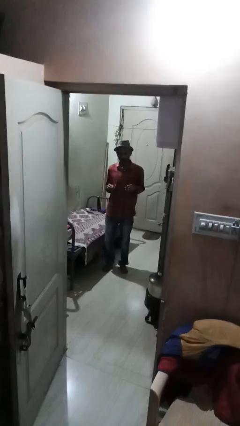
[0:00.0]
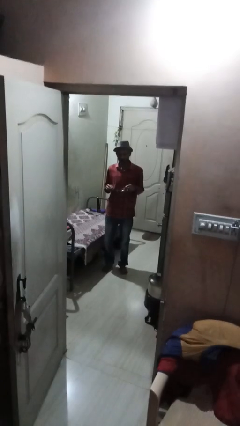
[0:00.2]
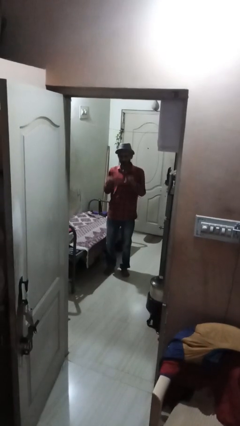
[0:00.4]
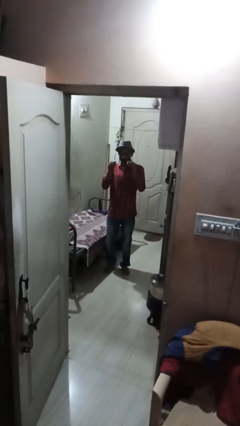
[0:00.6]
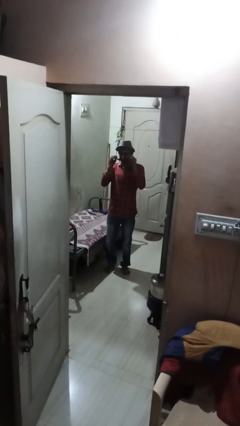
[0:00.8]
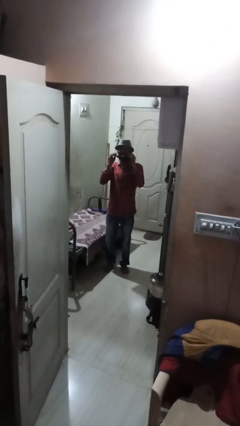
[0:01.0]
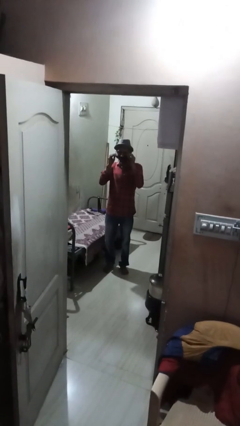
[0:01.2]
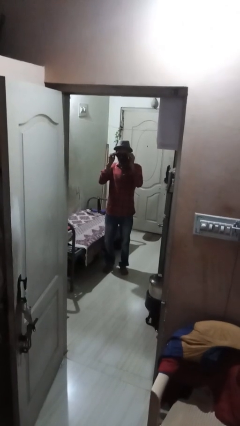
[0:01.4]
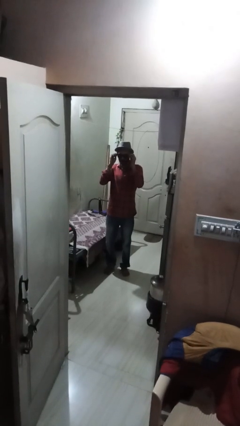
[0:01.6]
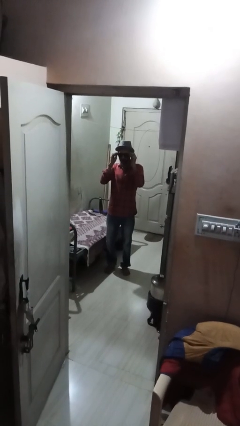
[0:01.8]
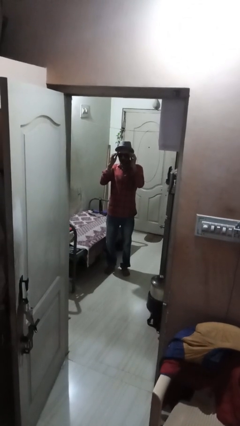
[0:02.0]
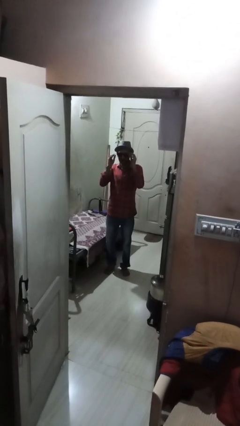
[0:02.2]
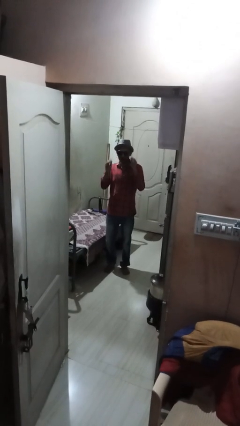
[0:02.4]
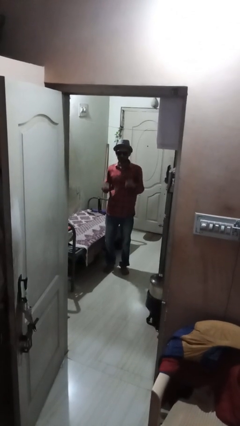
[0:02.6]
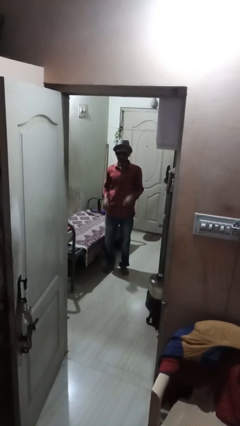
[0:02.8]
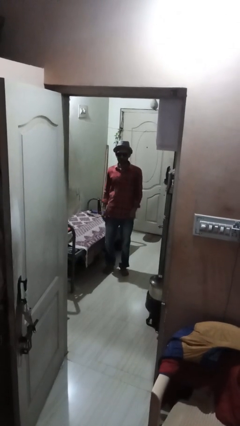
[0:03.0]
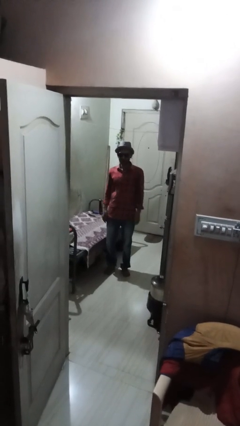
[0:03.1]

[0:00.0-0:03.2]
person puts on sunglasses

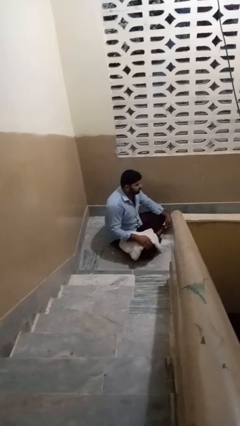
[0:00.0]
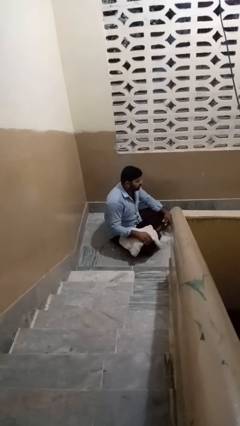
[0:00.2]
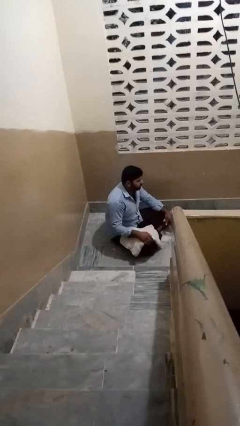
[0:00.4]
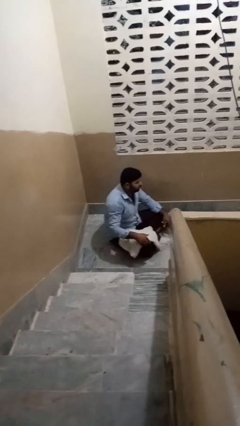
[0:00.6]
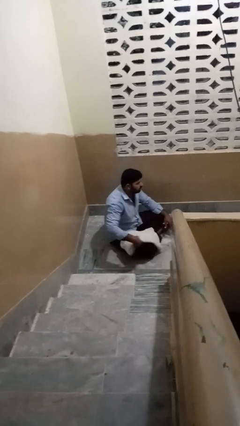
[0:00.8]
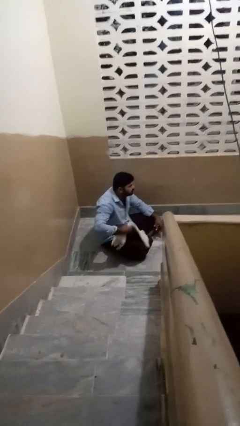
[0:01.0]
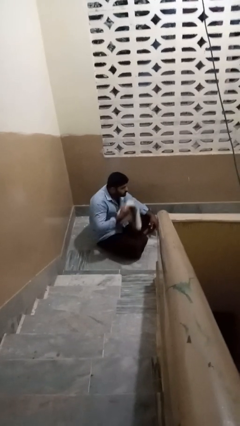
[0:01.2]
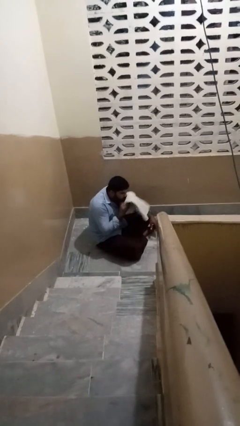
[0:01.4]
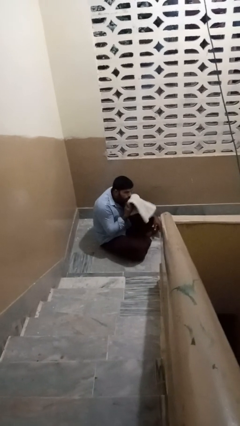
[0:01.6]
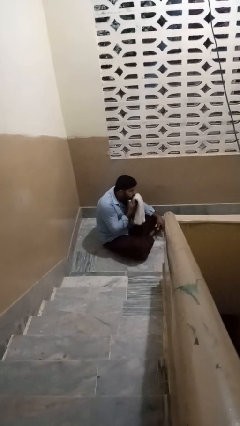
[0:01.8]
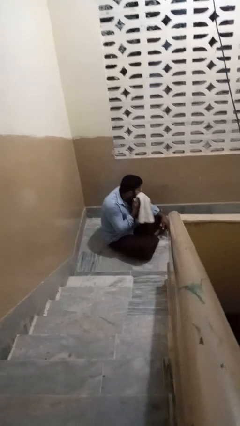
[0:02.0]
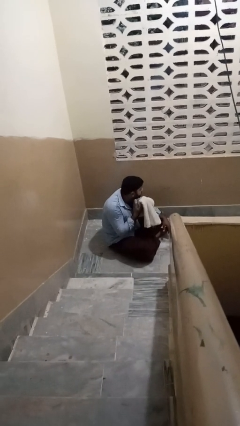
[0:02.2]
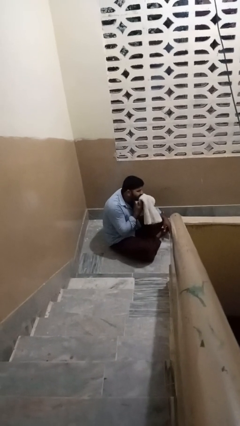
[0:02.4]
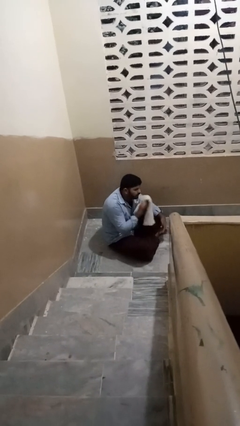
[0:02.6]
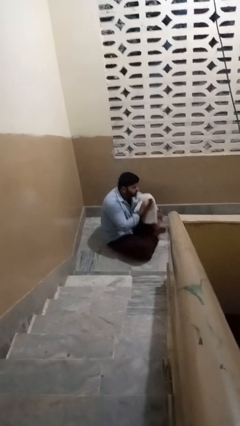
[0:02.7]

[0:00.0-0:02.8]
person wipes mouth with napkin

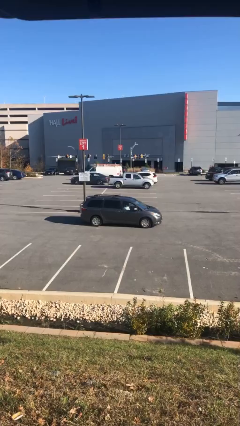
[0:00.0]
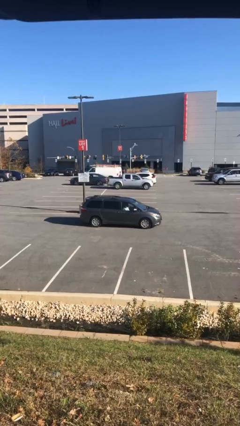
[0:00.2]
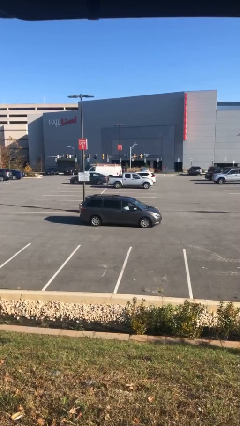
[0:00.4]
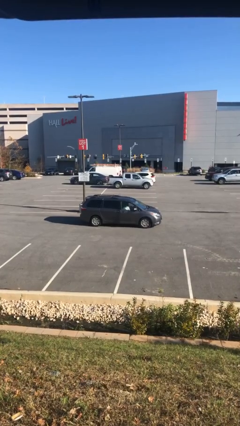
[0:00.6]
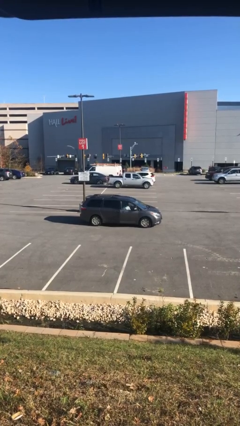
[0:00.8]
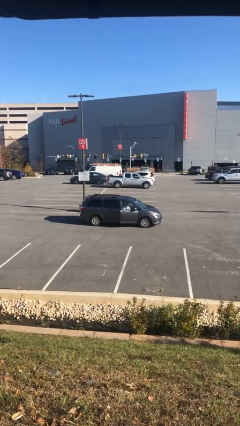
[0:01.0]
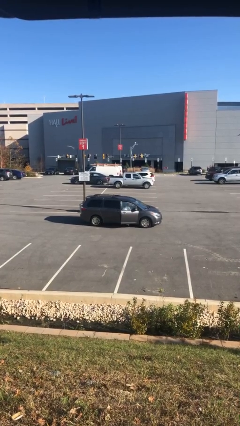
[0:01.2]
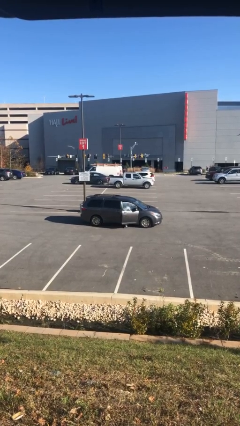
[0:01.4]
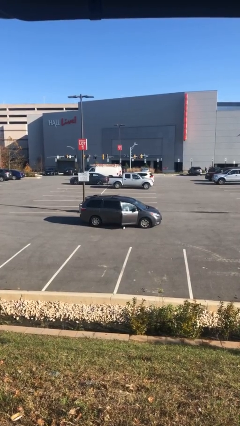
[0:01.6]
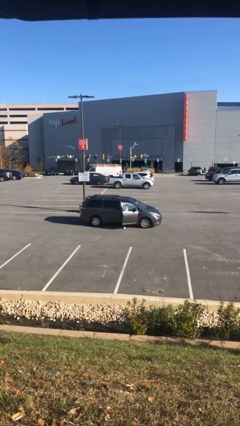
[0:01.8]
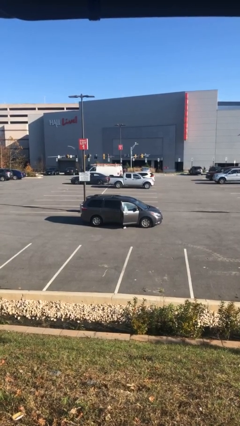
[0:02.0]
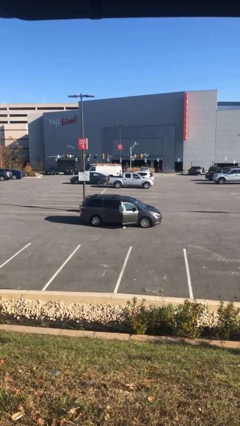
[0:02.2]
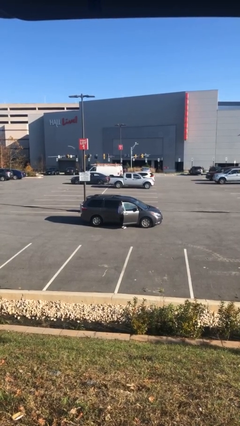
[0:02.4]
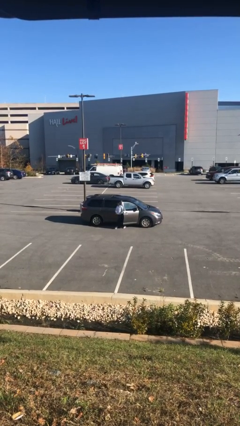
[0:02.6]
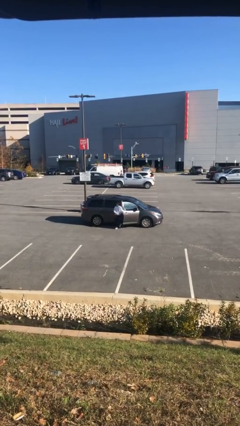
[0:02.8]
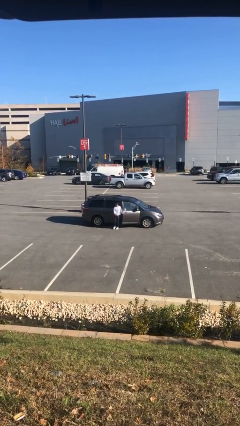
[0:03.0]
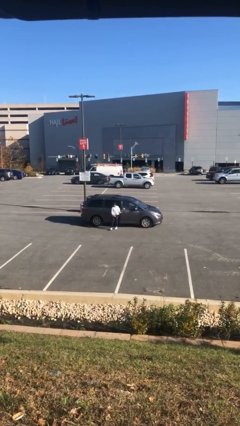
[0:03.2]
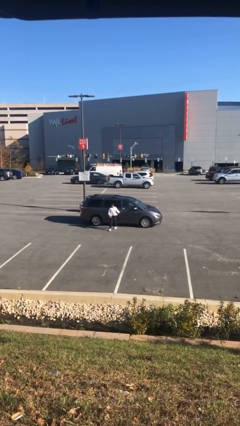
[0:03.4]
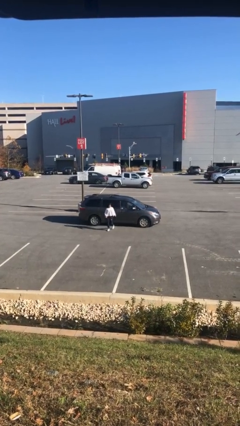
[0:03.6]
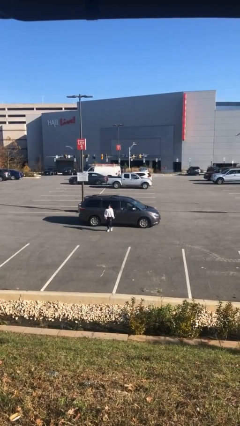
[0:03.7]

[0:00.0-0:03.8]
car drops off person

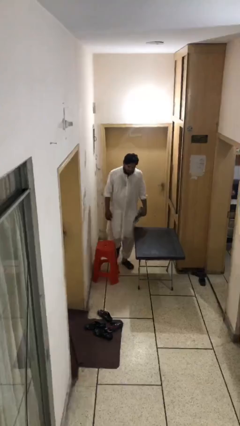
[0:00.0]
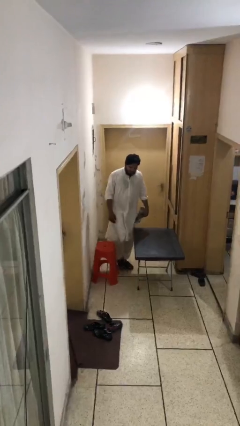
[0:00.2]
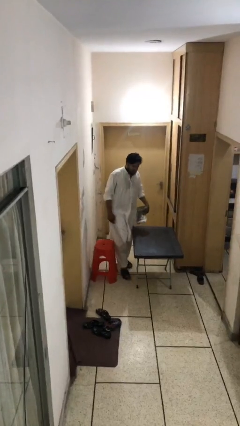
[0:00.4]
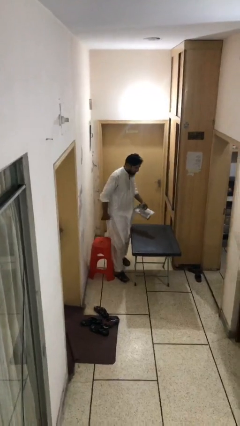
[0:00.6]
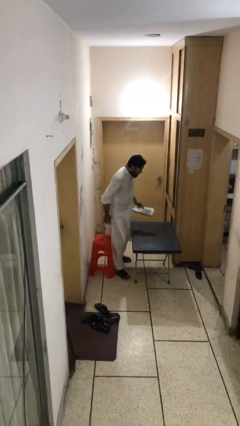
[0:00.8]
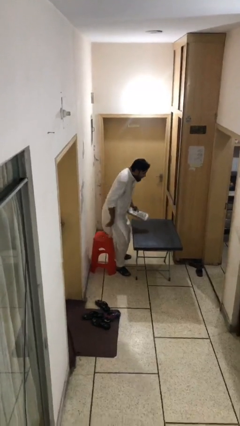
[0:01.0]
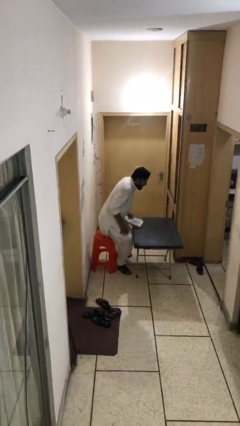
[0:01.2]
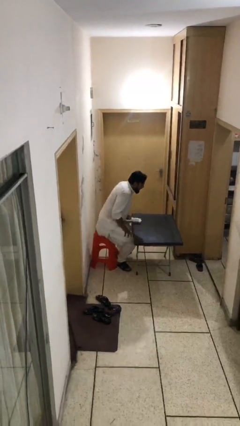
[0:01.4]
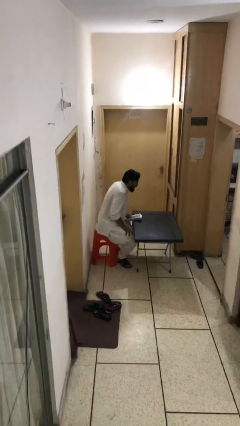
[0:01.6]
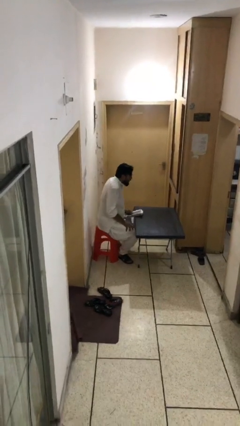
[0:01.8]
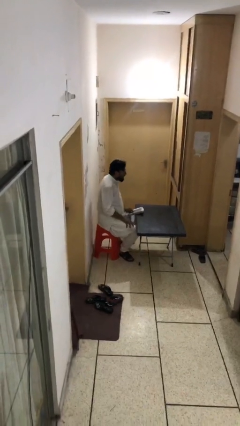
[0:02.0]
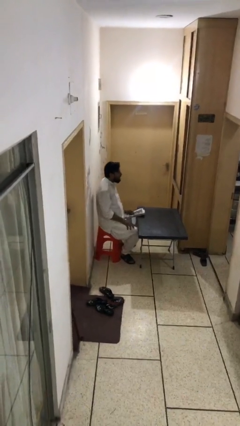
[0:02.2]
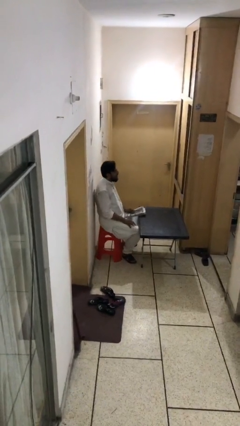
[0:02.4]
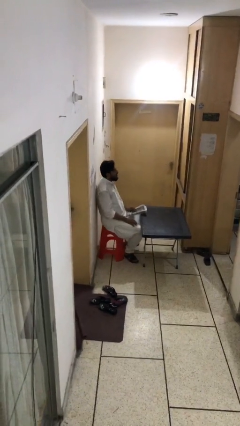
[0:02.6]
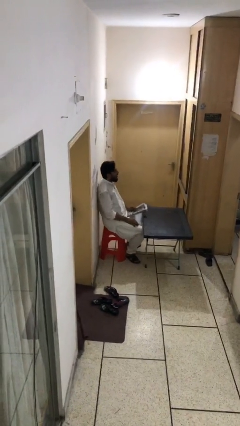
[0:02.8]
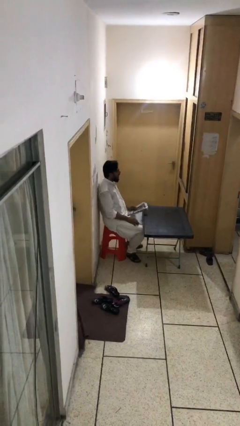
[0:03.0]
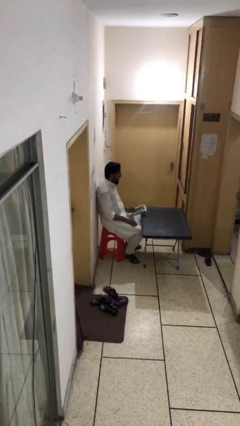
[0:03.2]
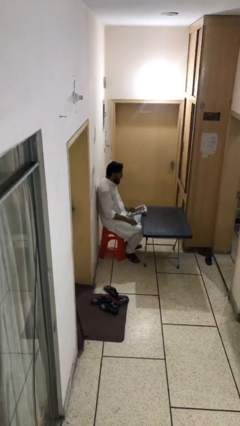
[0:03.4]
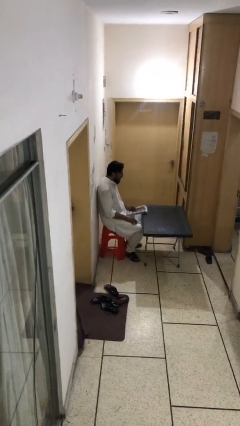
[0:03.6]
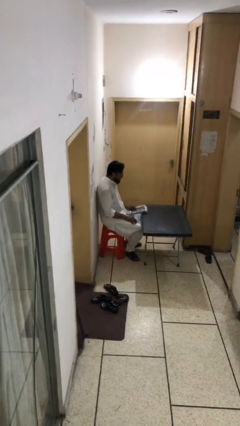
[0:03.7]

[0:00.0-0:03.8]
person sits down

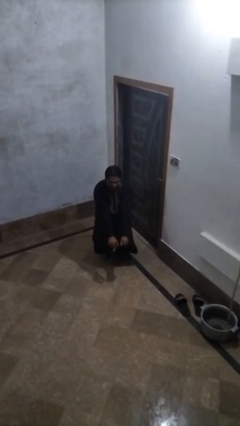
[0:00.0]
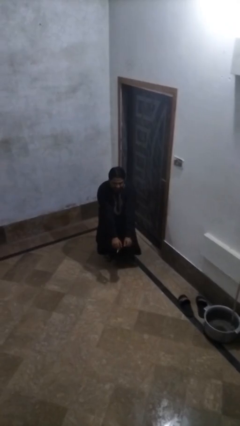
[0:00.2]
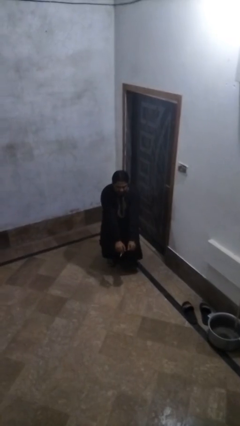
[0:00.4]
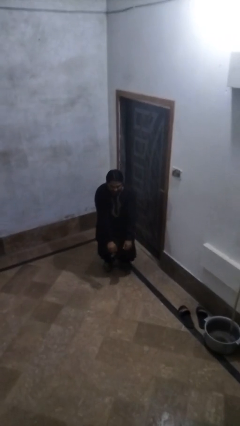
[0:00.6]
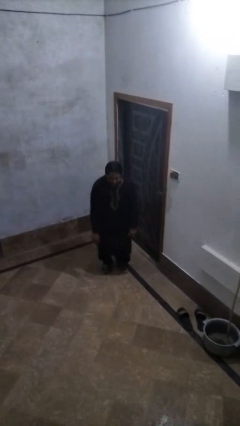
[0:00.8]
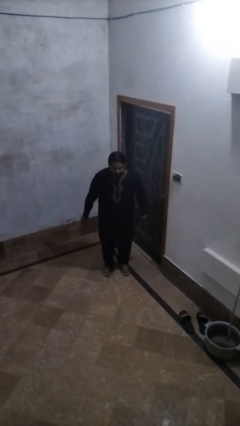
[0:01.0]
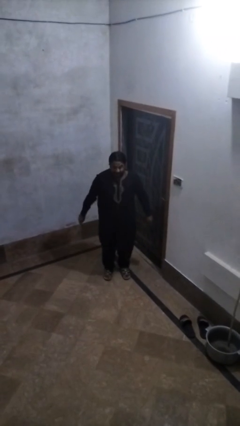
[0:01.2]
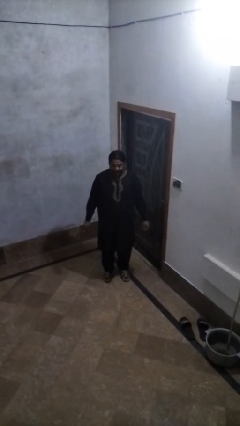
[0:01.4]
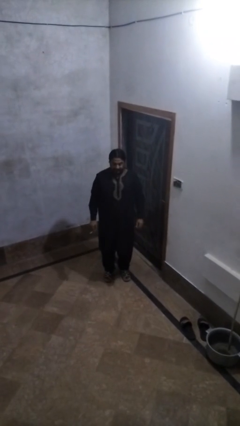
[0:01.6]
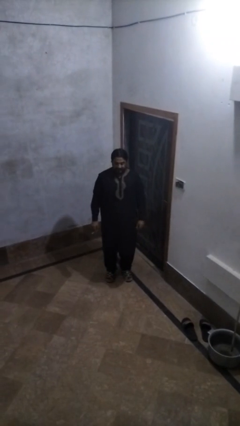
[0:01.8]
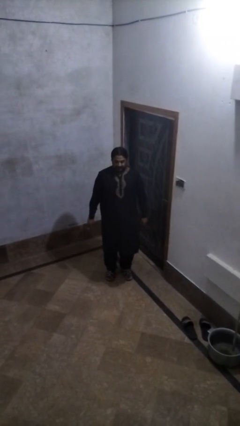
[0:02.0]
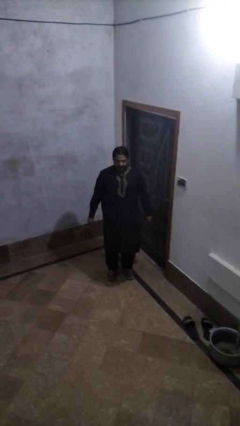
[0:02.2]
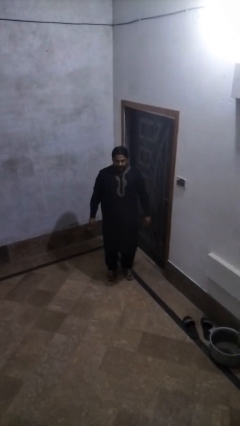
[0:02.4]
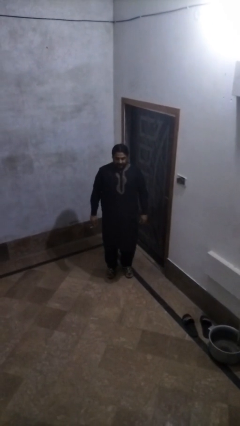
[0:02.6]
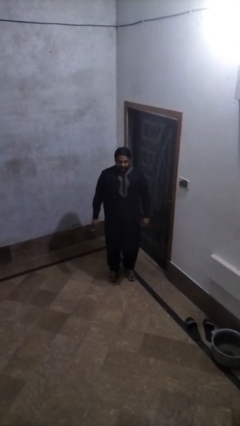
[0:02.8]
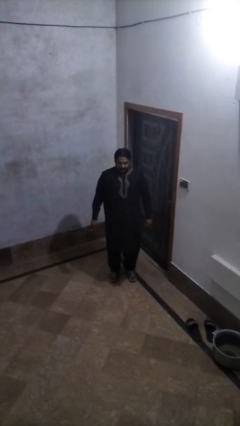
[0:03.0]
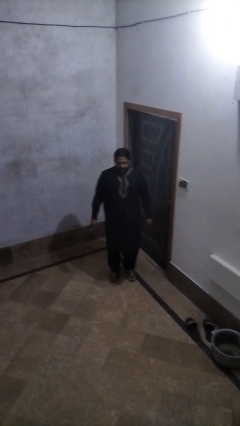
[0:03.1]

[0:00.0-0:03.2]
person stands up

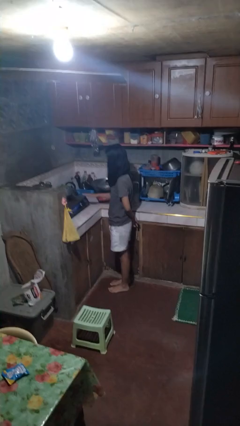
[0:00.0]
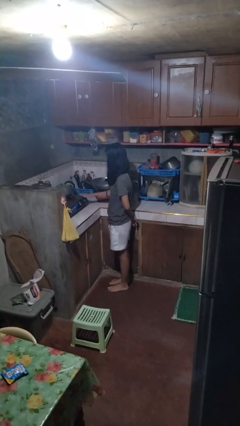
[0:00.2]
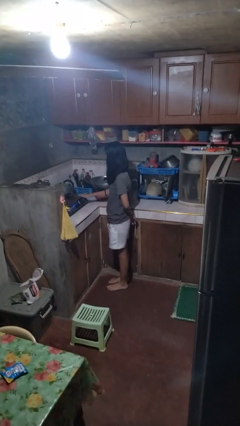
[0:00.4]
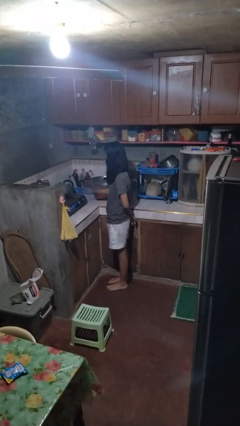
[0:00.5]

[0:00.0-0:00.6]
person burns hand

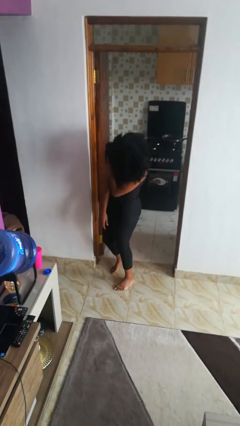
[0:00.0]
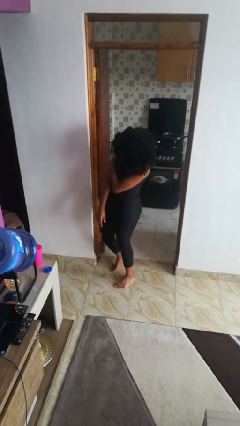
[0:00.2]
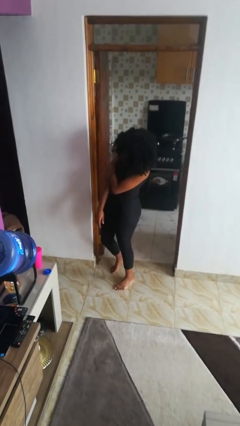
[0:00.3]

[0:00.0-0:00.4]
person bumps into wall
